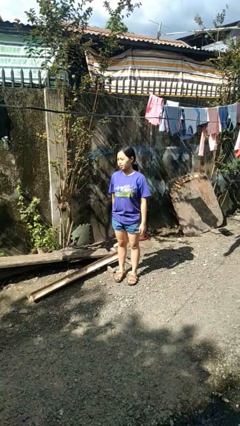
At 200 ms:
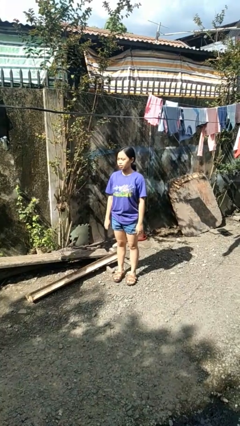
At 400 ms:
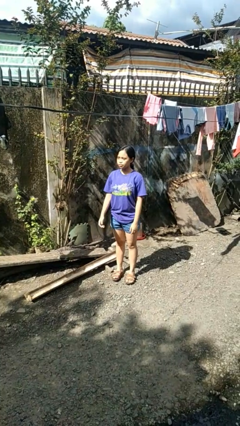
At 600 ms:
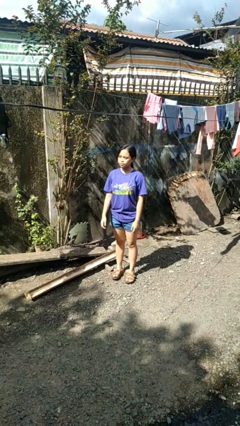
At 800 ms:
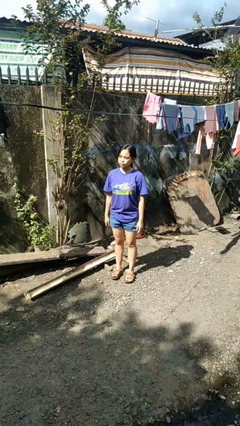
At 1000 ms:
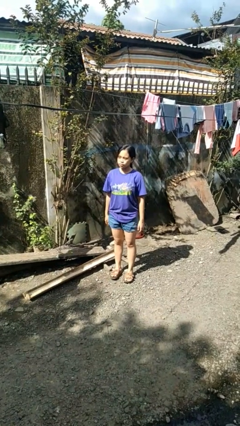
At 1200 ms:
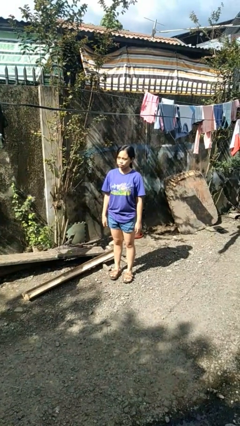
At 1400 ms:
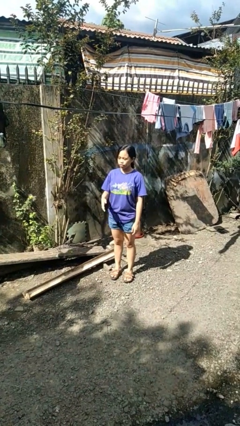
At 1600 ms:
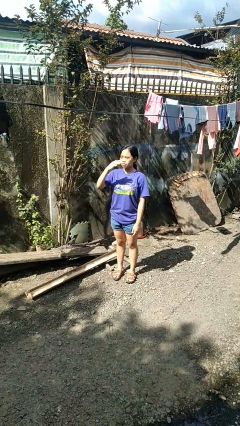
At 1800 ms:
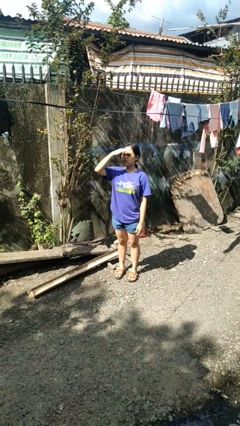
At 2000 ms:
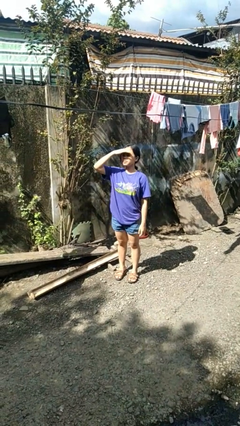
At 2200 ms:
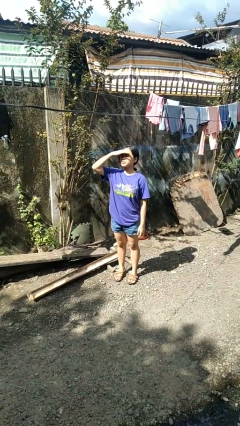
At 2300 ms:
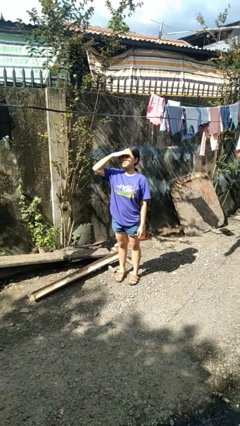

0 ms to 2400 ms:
person shades eyes

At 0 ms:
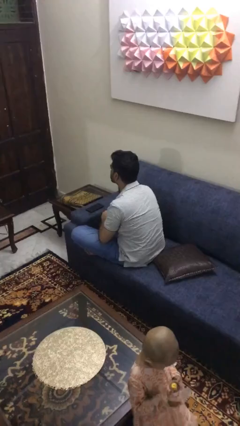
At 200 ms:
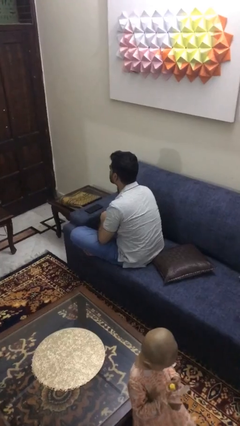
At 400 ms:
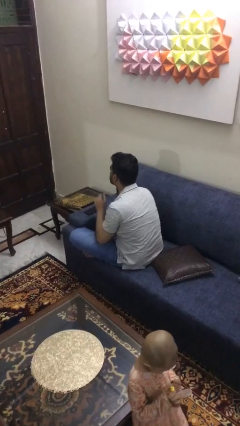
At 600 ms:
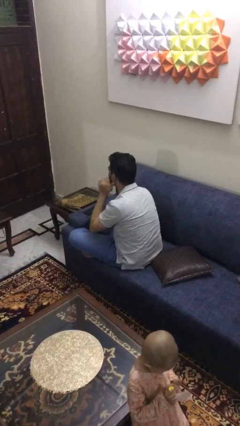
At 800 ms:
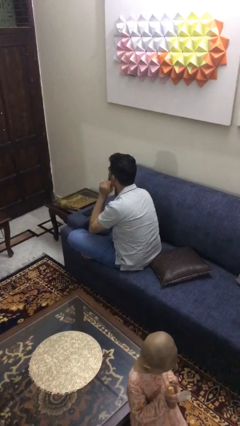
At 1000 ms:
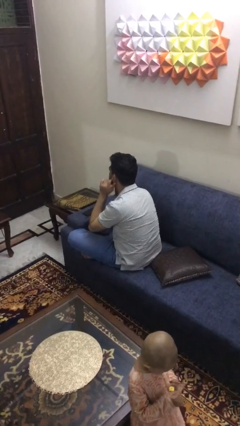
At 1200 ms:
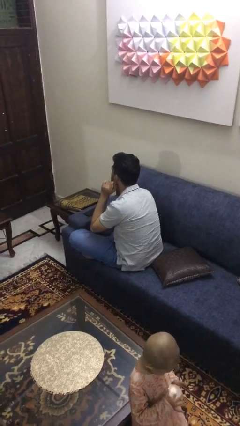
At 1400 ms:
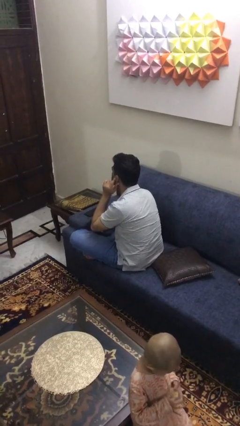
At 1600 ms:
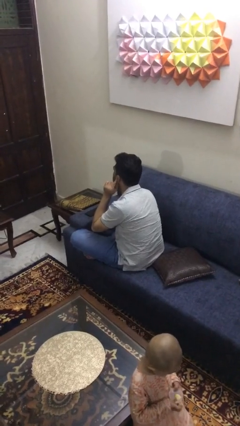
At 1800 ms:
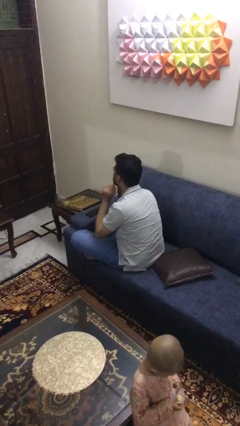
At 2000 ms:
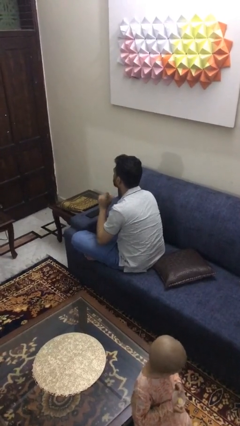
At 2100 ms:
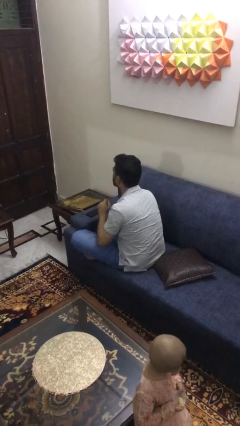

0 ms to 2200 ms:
person touches earlobe

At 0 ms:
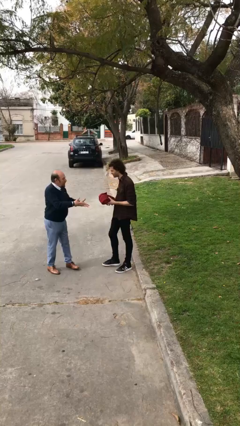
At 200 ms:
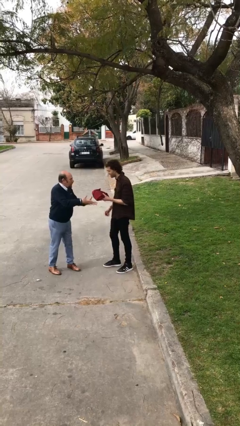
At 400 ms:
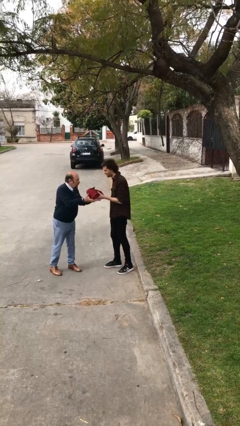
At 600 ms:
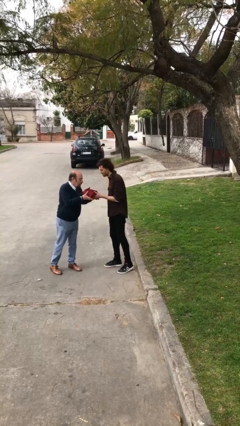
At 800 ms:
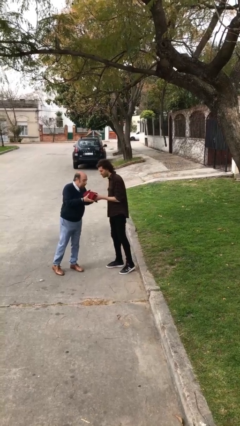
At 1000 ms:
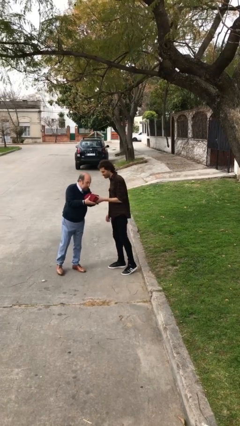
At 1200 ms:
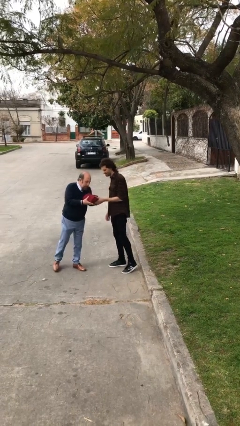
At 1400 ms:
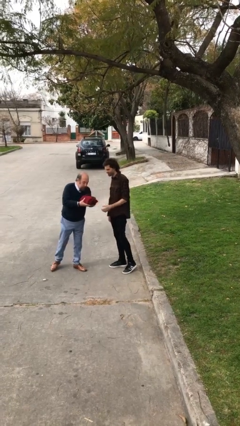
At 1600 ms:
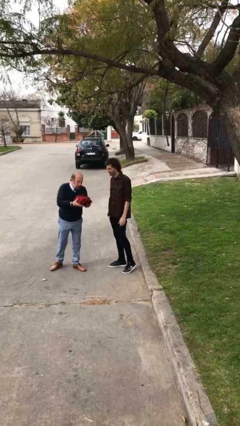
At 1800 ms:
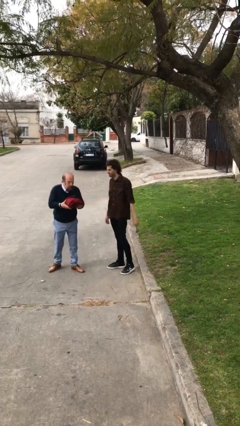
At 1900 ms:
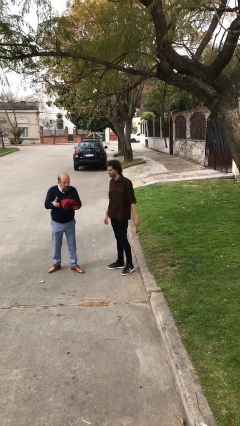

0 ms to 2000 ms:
person transfers object to person

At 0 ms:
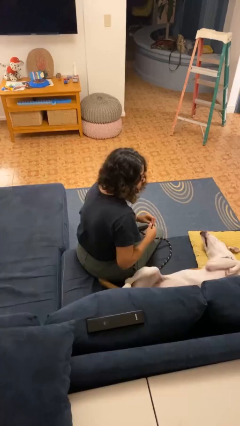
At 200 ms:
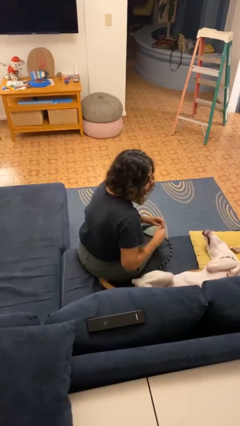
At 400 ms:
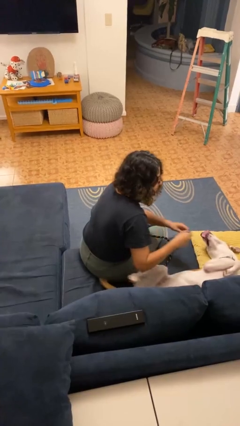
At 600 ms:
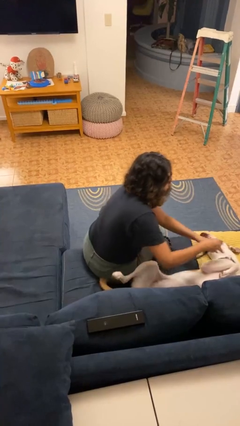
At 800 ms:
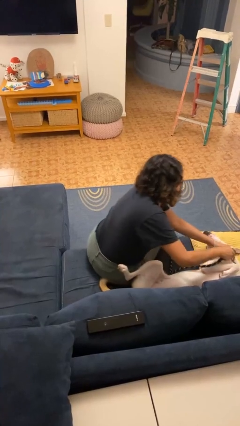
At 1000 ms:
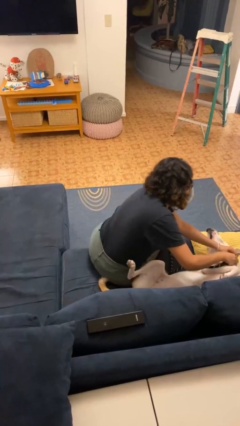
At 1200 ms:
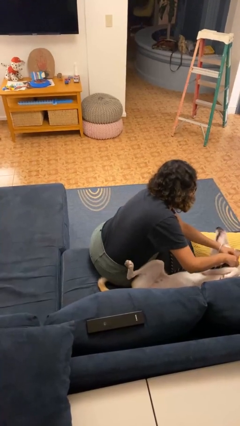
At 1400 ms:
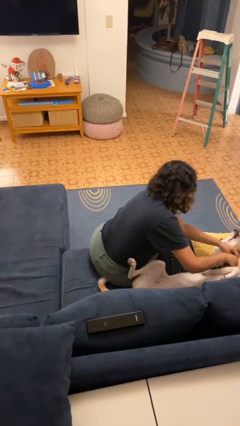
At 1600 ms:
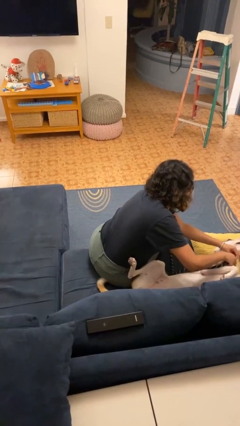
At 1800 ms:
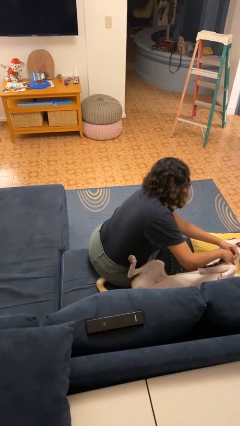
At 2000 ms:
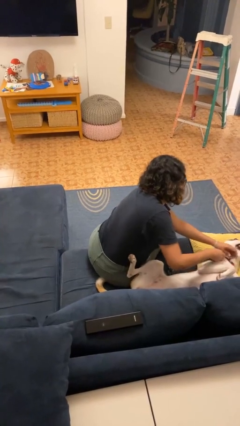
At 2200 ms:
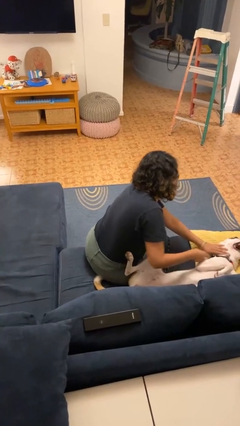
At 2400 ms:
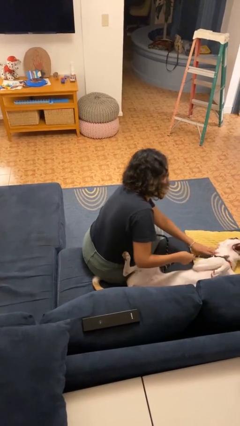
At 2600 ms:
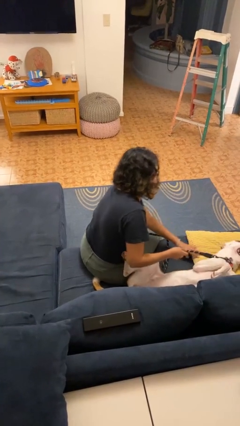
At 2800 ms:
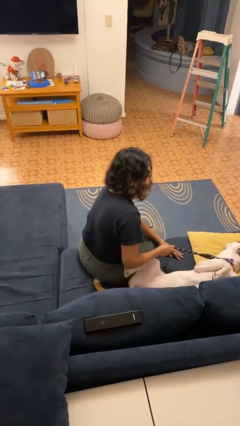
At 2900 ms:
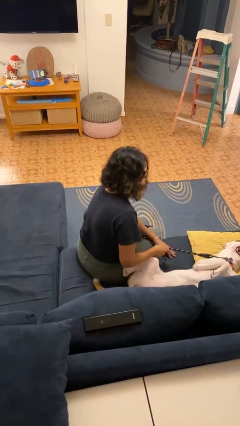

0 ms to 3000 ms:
person attaches leash to dog

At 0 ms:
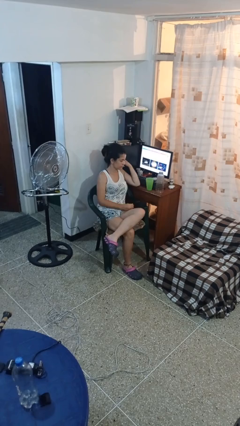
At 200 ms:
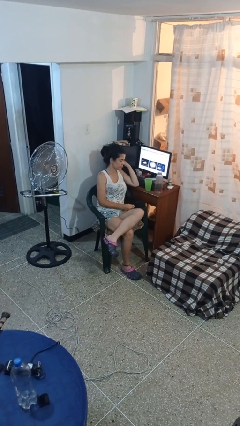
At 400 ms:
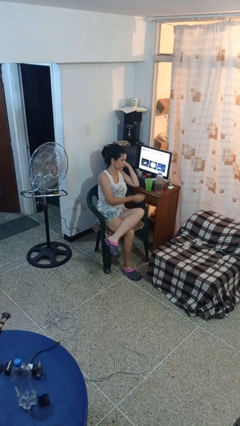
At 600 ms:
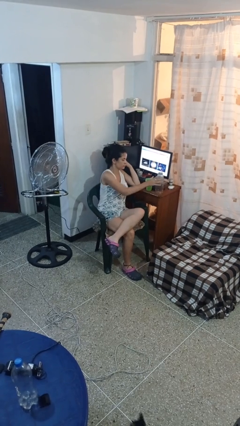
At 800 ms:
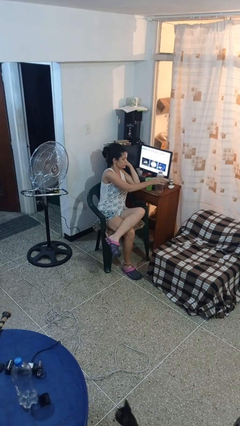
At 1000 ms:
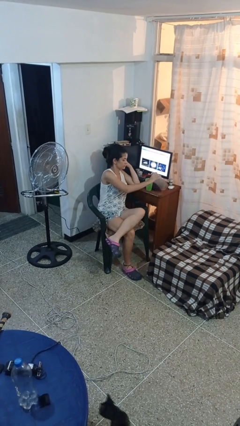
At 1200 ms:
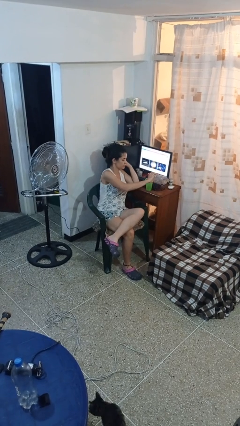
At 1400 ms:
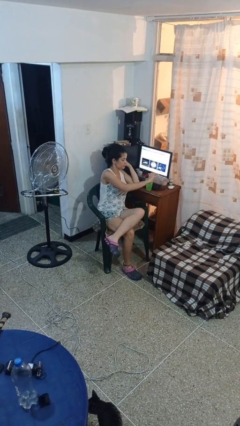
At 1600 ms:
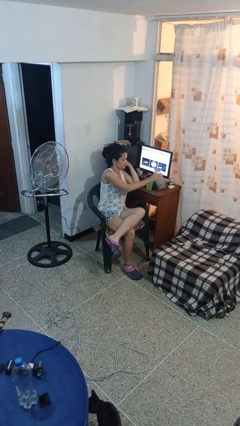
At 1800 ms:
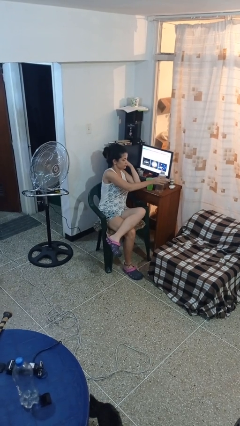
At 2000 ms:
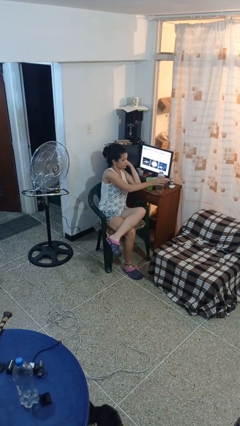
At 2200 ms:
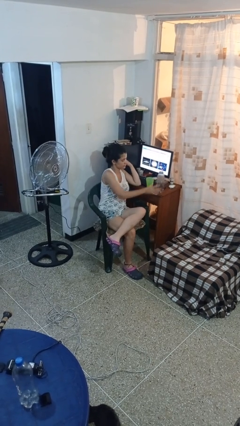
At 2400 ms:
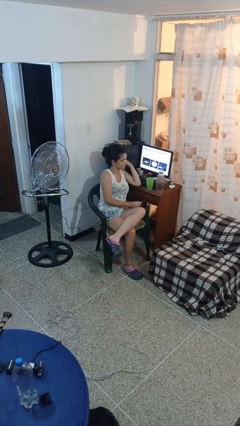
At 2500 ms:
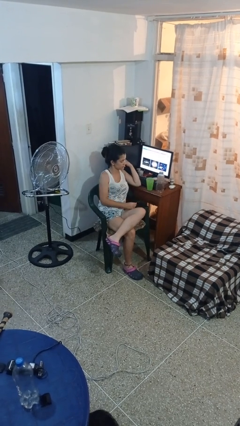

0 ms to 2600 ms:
person pours liquid into cup

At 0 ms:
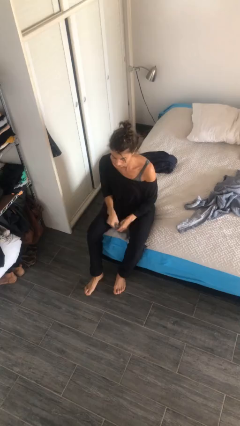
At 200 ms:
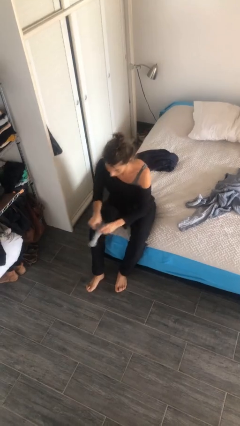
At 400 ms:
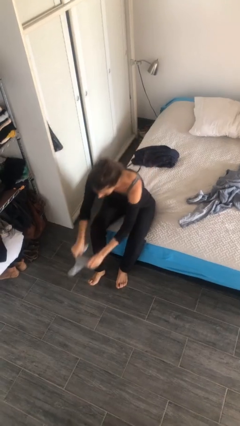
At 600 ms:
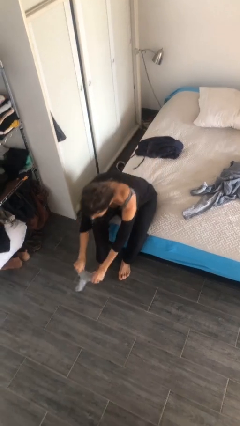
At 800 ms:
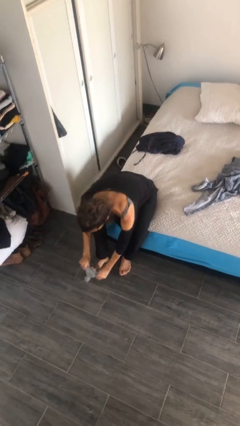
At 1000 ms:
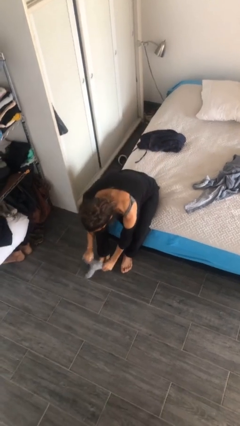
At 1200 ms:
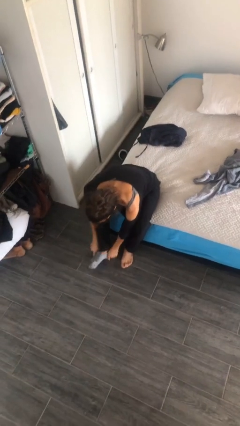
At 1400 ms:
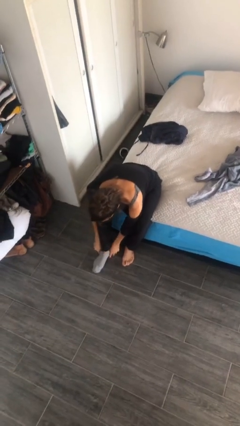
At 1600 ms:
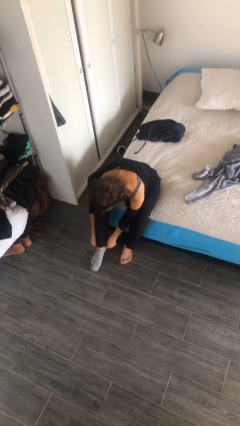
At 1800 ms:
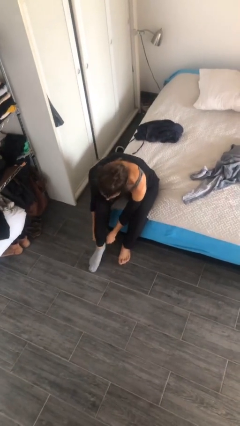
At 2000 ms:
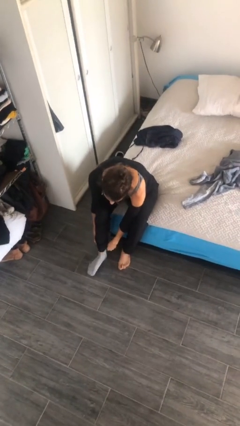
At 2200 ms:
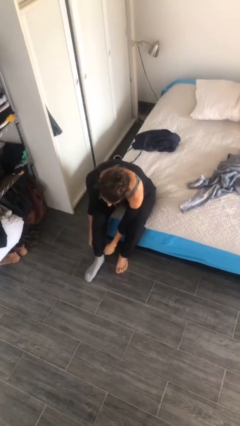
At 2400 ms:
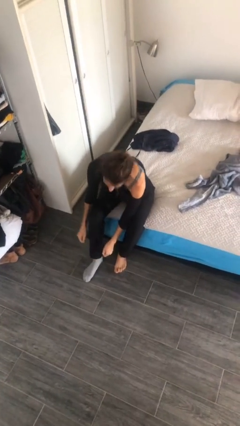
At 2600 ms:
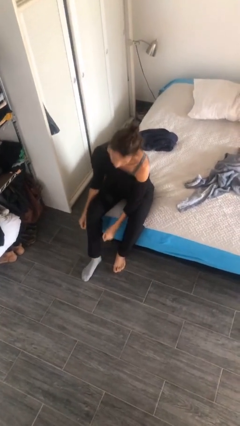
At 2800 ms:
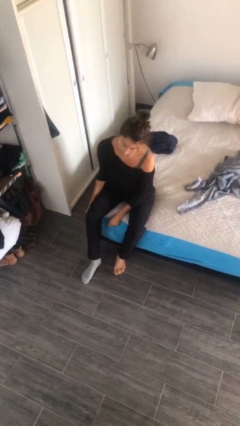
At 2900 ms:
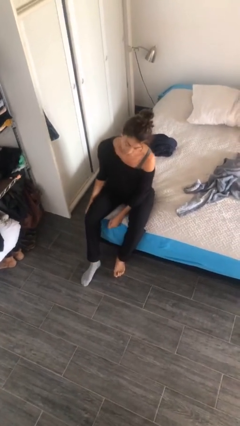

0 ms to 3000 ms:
person puts on socks

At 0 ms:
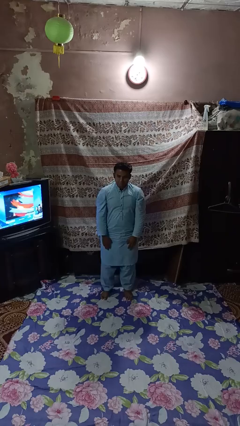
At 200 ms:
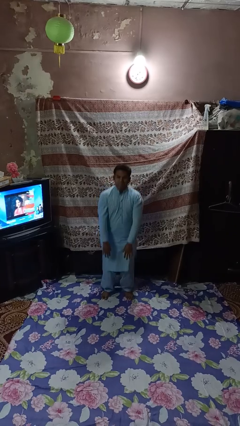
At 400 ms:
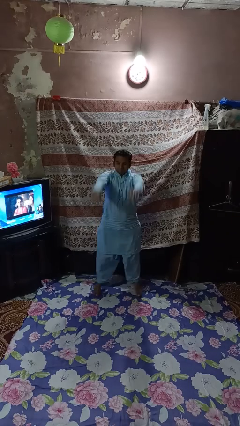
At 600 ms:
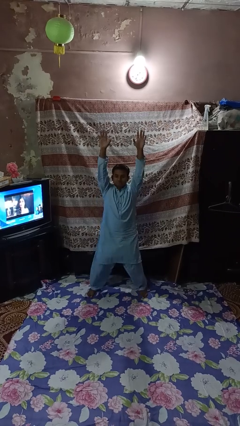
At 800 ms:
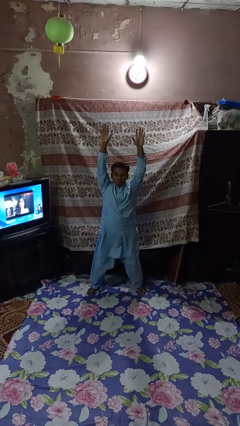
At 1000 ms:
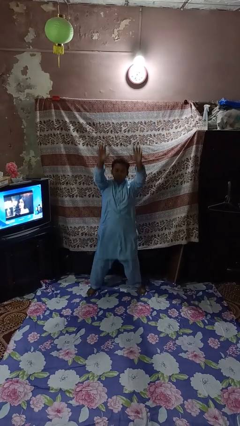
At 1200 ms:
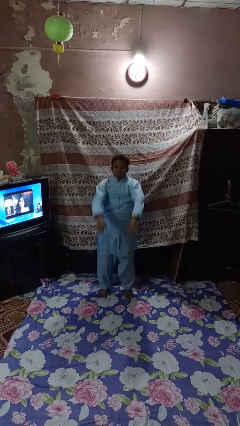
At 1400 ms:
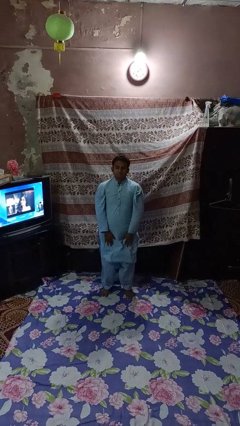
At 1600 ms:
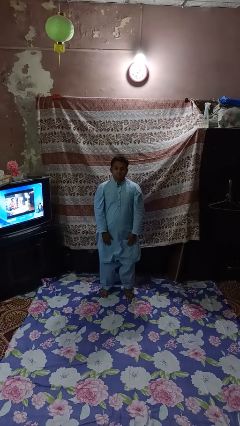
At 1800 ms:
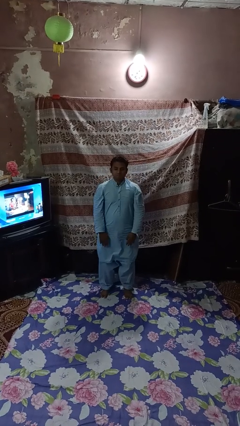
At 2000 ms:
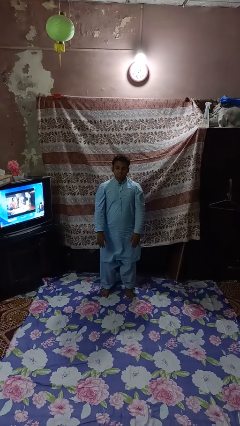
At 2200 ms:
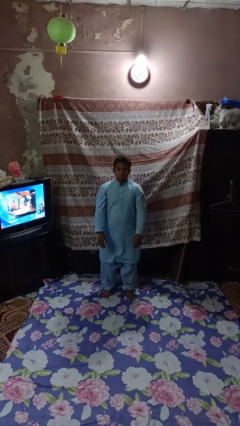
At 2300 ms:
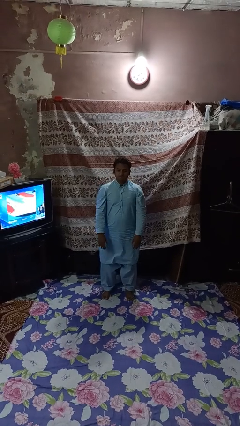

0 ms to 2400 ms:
person exercises with jumping jacks
